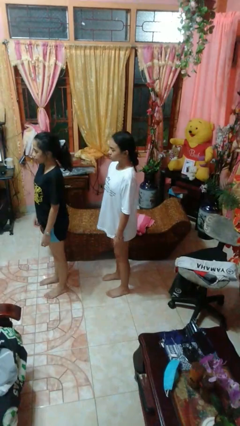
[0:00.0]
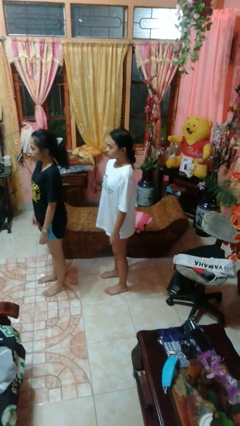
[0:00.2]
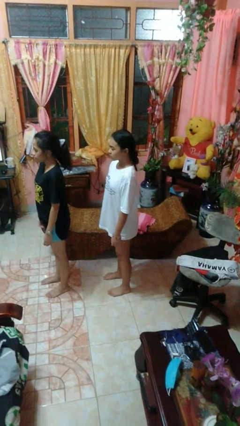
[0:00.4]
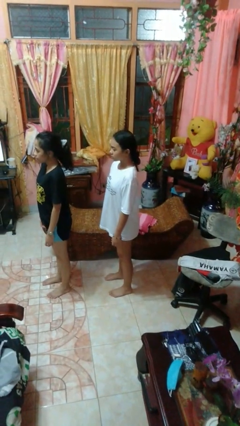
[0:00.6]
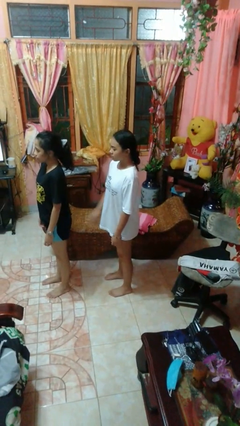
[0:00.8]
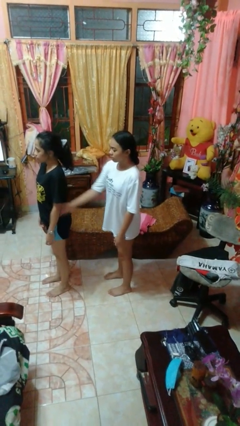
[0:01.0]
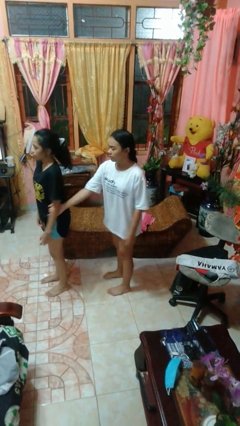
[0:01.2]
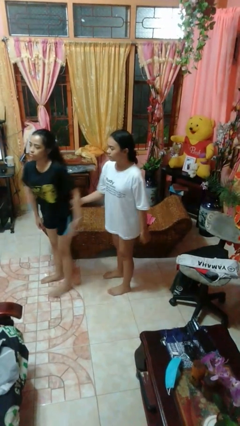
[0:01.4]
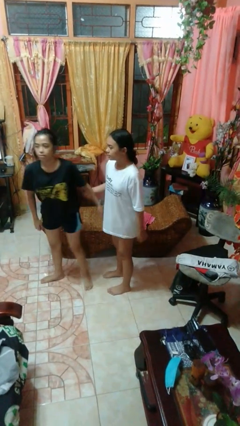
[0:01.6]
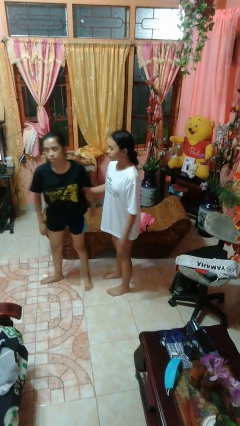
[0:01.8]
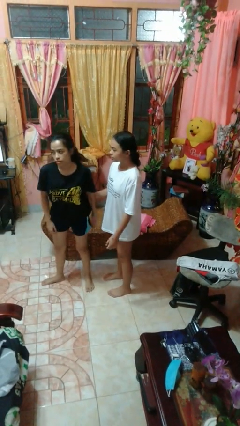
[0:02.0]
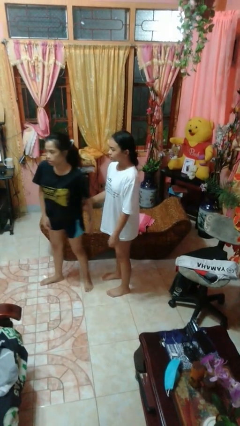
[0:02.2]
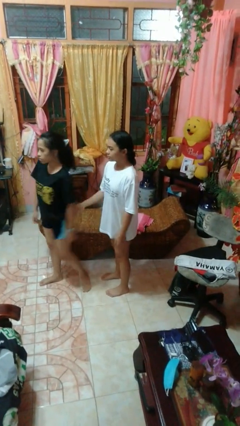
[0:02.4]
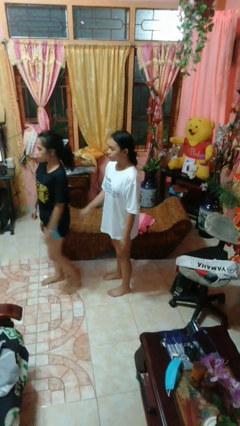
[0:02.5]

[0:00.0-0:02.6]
person grabs person by forearm

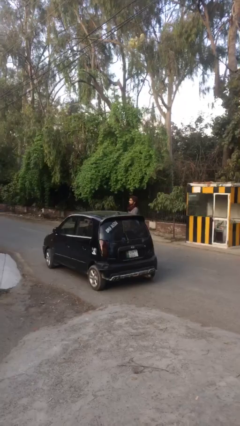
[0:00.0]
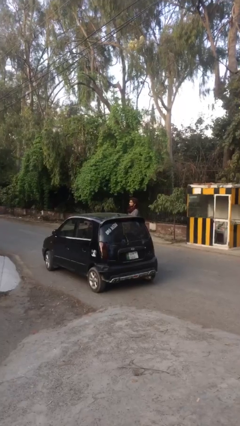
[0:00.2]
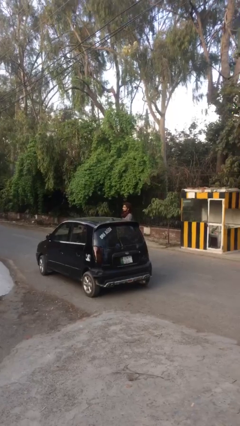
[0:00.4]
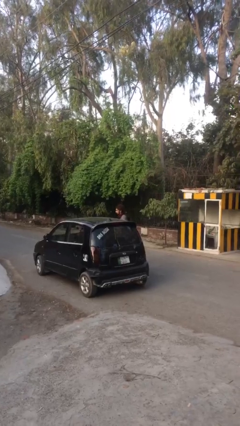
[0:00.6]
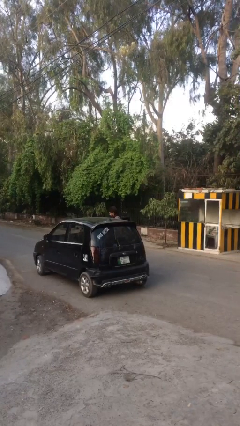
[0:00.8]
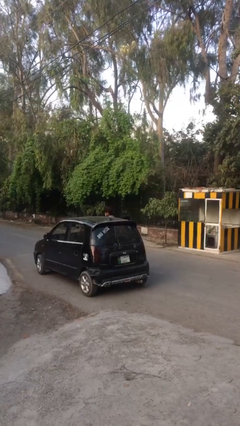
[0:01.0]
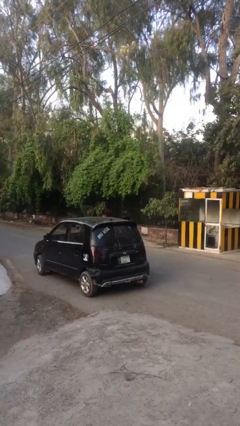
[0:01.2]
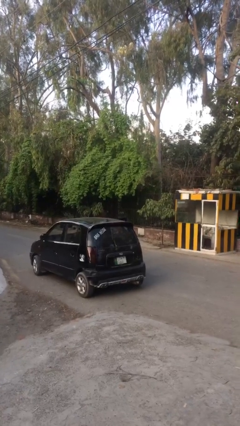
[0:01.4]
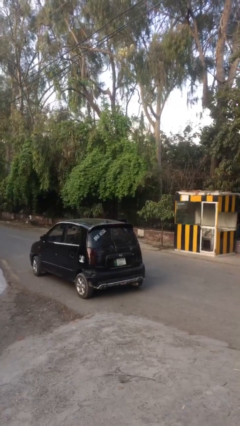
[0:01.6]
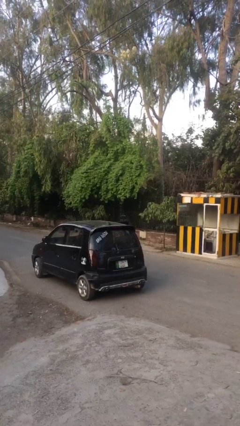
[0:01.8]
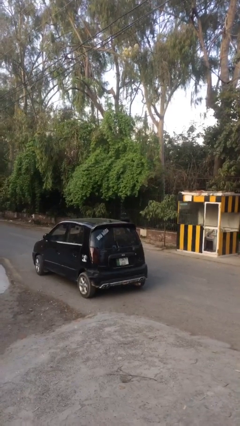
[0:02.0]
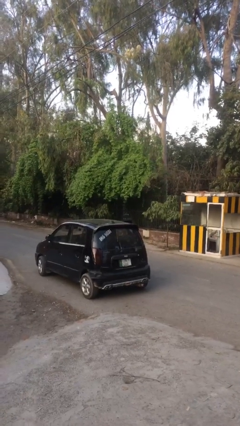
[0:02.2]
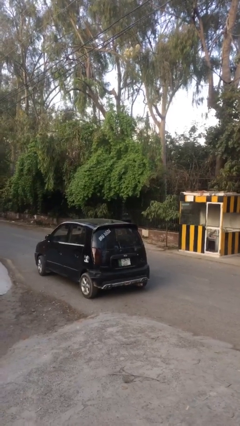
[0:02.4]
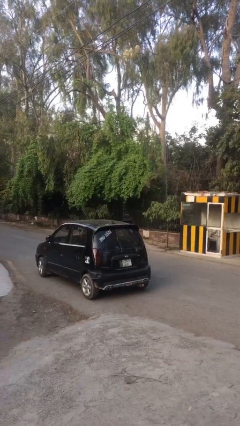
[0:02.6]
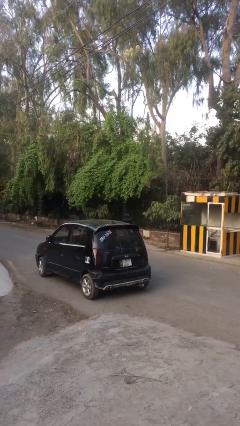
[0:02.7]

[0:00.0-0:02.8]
person enters car

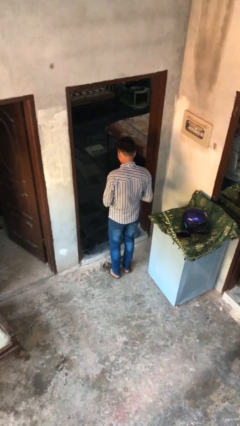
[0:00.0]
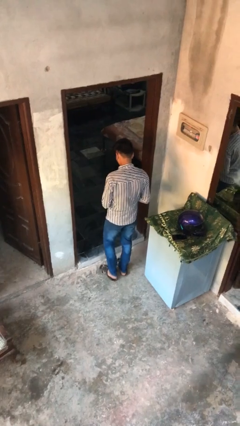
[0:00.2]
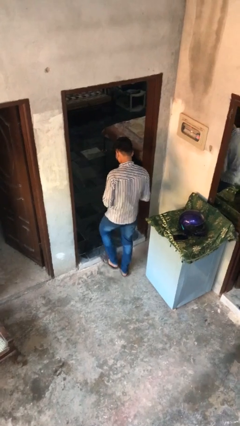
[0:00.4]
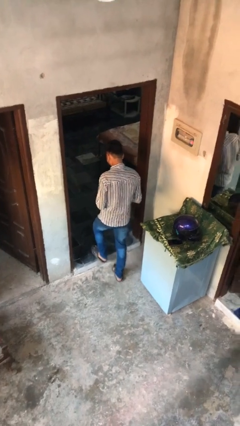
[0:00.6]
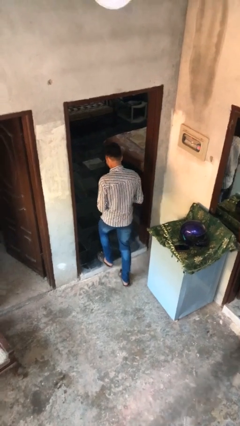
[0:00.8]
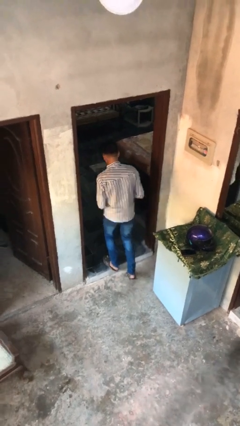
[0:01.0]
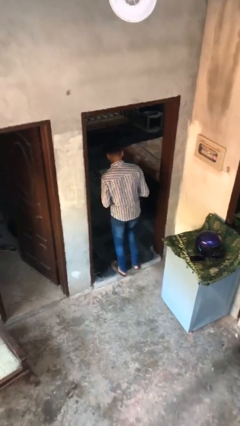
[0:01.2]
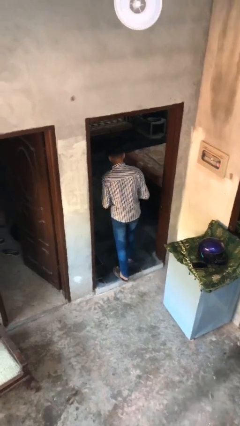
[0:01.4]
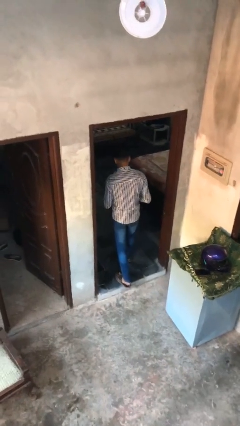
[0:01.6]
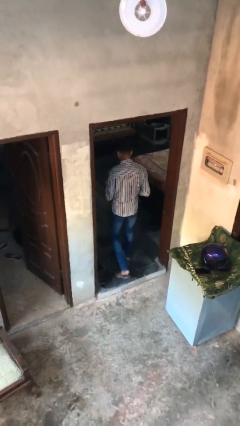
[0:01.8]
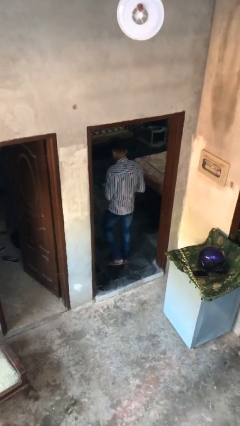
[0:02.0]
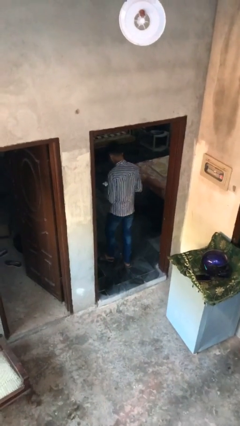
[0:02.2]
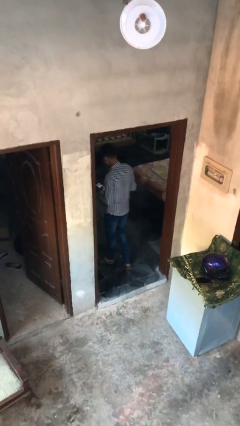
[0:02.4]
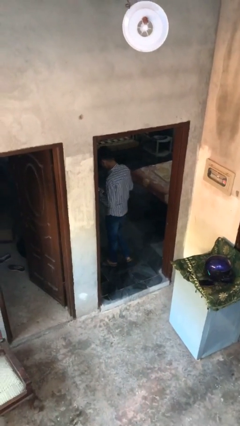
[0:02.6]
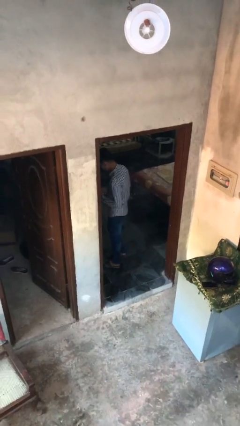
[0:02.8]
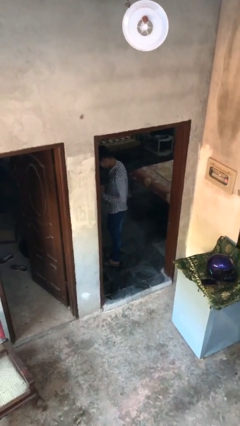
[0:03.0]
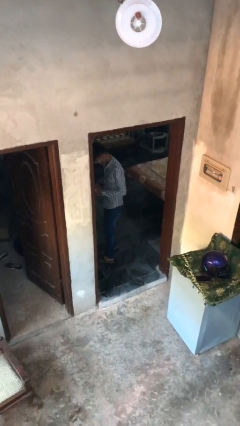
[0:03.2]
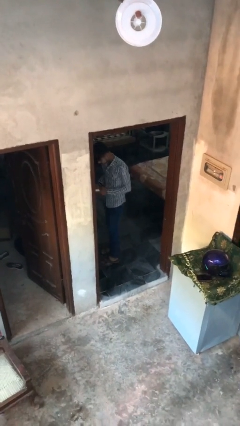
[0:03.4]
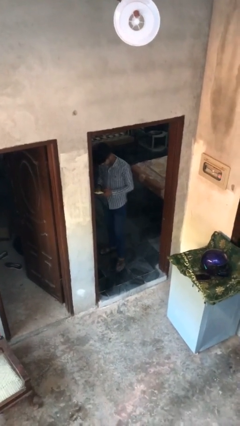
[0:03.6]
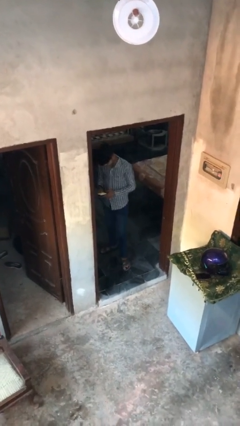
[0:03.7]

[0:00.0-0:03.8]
person enters scene through structure

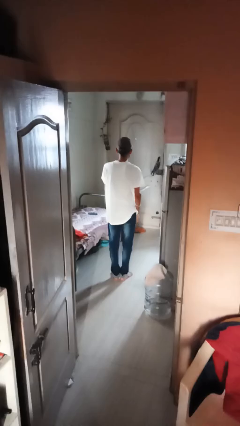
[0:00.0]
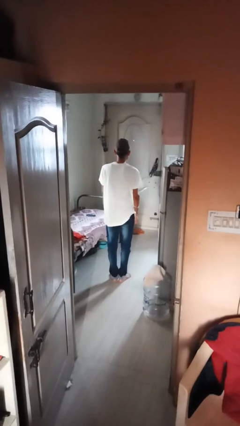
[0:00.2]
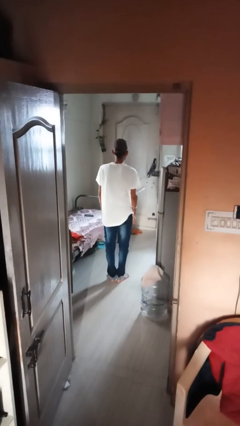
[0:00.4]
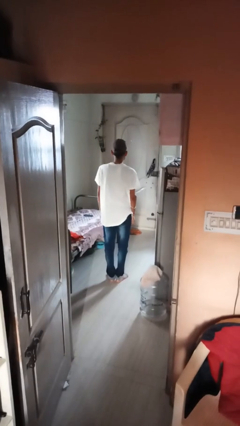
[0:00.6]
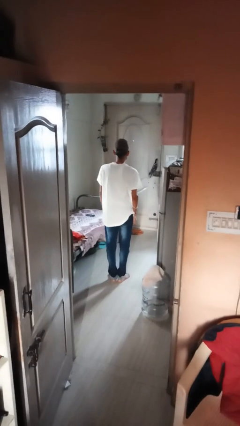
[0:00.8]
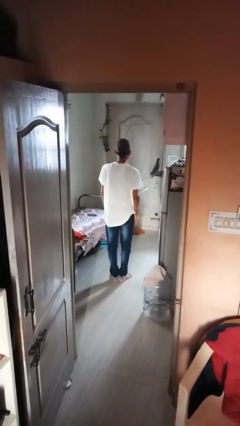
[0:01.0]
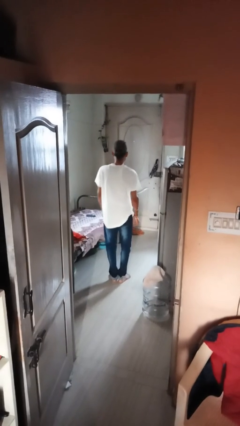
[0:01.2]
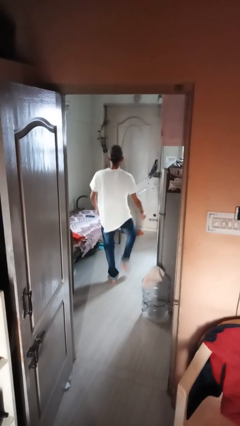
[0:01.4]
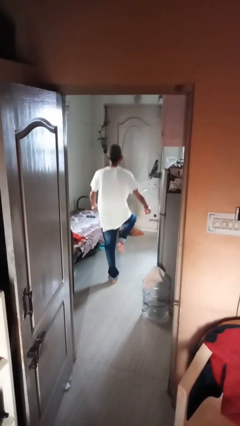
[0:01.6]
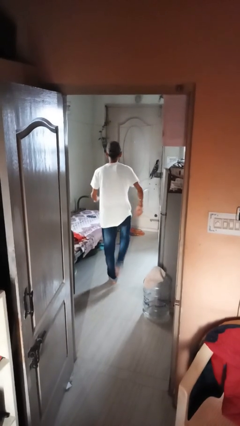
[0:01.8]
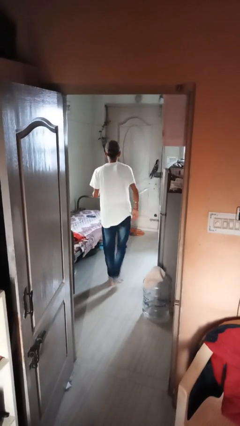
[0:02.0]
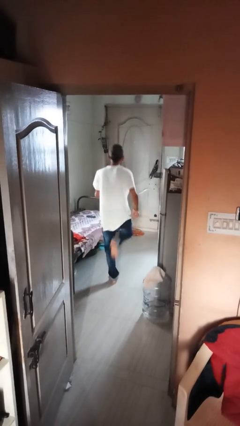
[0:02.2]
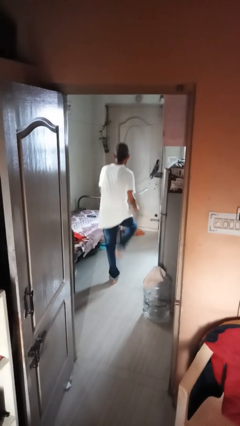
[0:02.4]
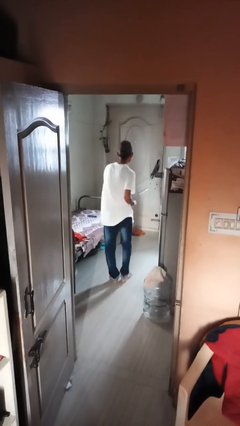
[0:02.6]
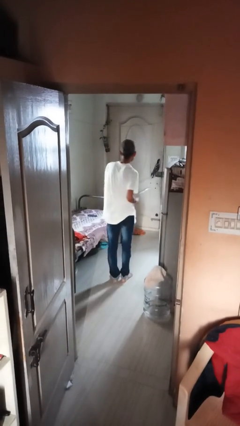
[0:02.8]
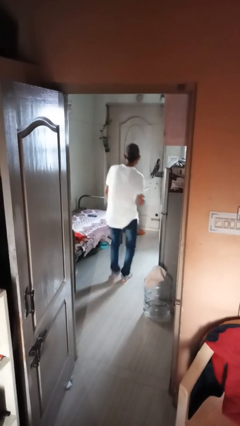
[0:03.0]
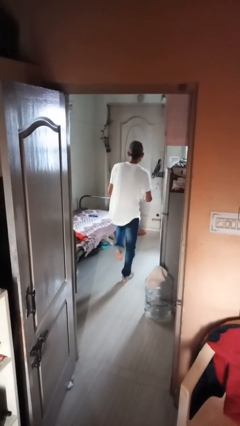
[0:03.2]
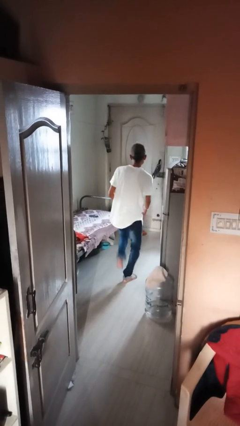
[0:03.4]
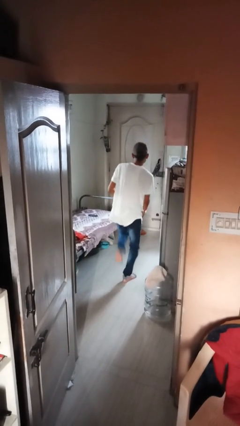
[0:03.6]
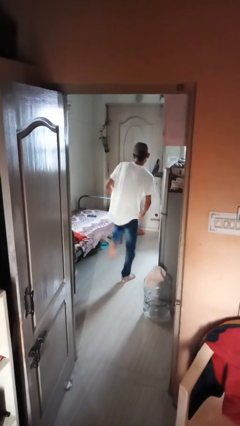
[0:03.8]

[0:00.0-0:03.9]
person dances in place

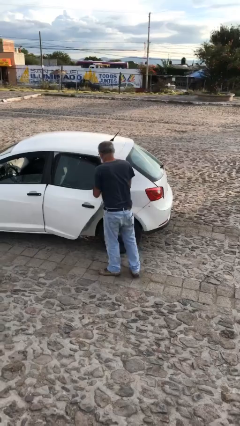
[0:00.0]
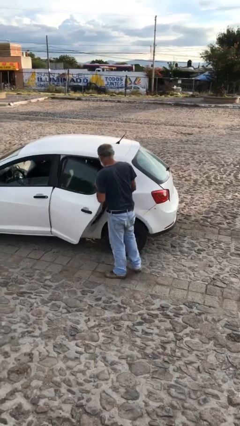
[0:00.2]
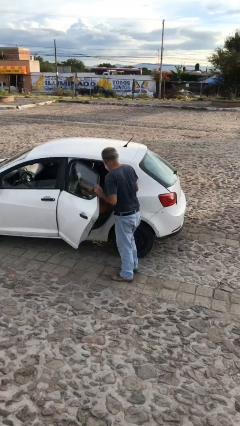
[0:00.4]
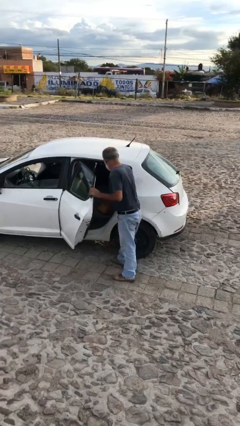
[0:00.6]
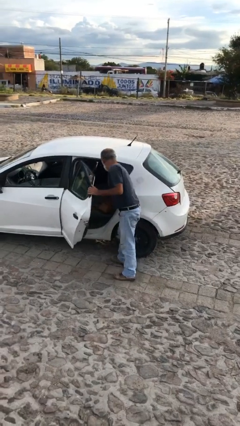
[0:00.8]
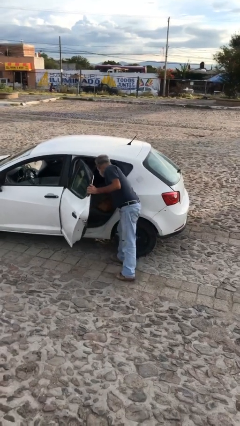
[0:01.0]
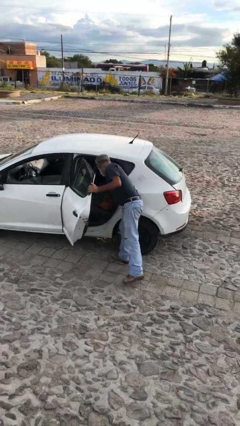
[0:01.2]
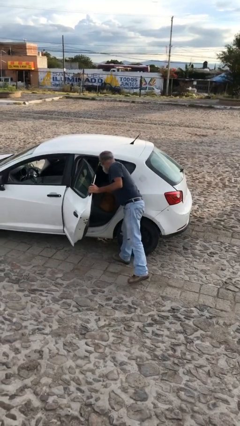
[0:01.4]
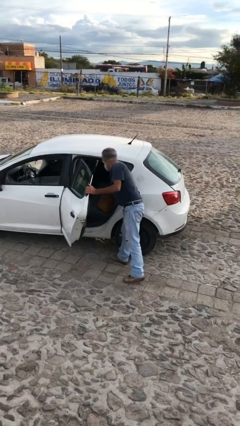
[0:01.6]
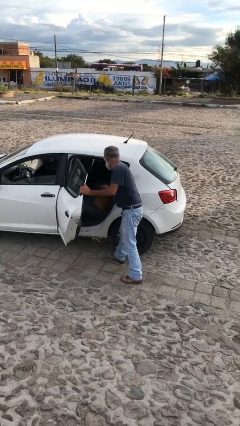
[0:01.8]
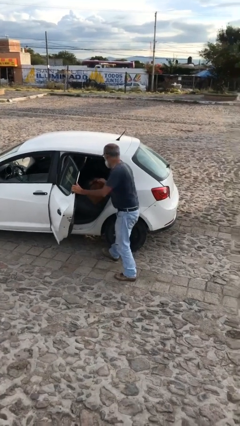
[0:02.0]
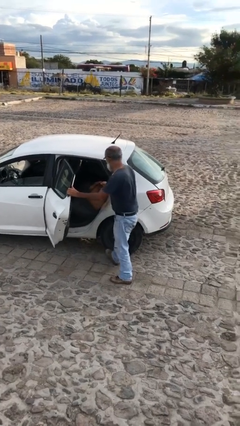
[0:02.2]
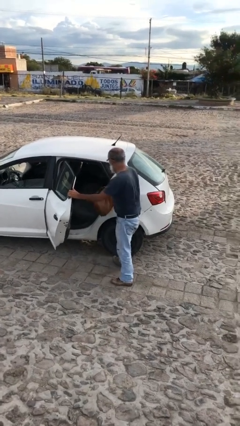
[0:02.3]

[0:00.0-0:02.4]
person unloads car

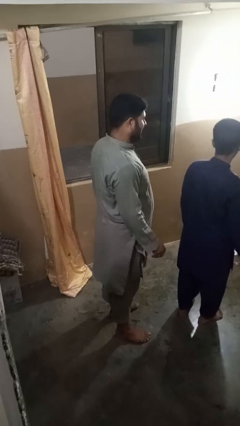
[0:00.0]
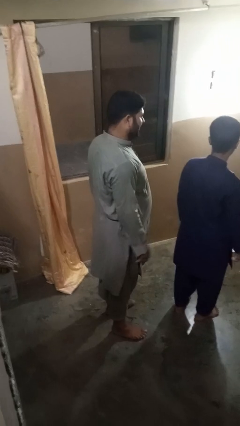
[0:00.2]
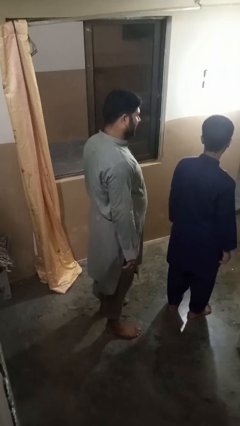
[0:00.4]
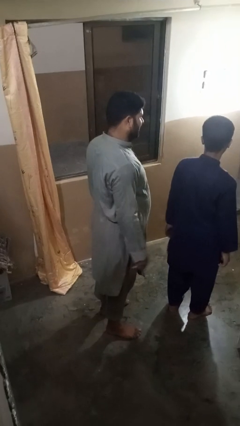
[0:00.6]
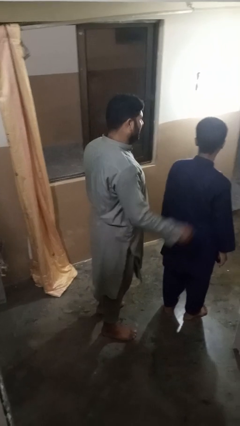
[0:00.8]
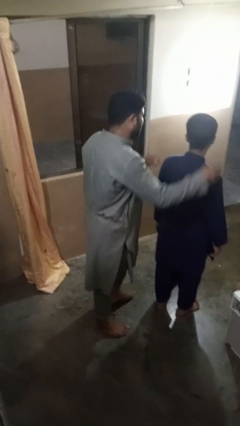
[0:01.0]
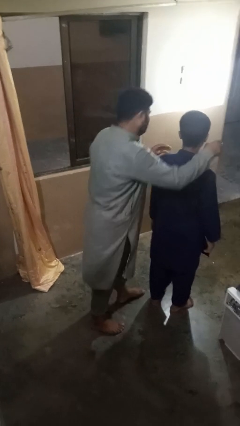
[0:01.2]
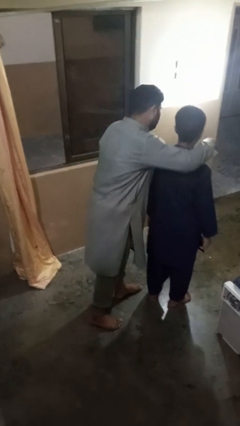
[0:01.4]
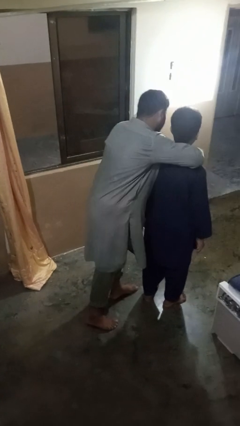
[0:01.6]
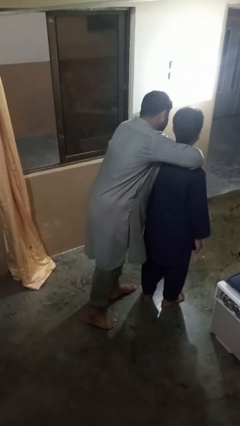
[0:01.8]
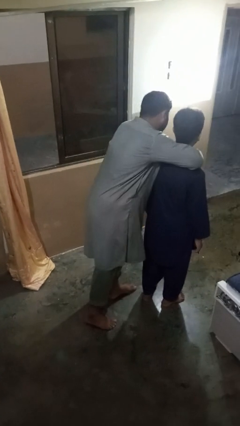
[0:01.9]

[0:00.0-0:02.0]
person hugs person from behind
